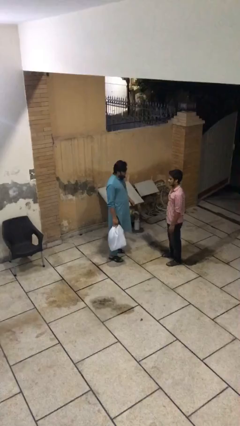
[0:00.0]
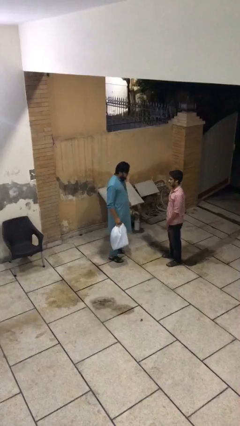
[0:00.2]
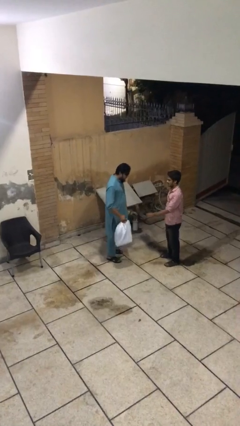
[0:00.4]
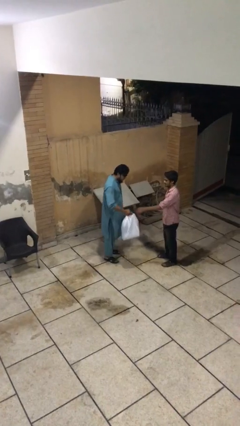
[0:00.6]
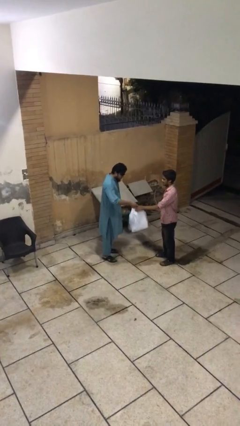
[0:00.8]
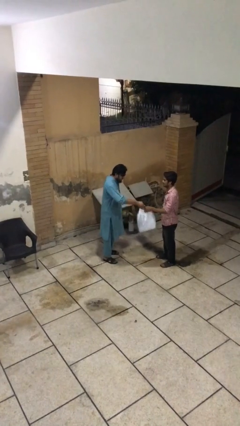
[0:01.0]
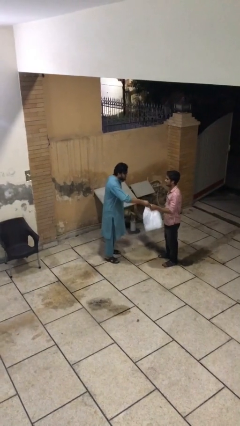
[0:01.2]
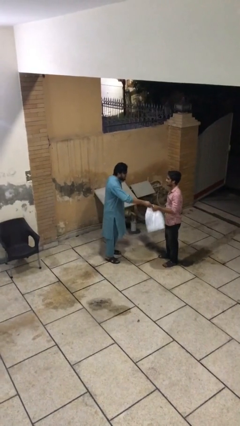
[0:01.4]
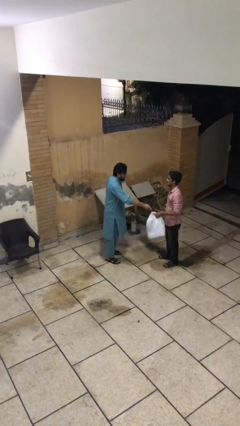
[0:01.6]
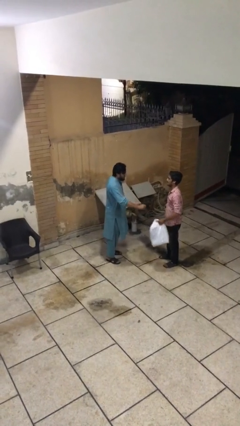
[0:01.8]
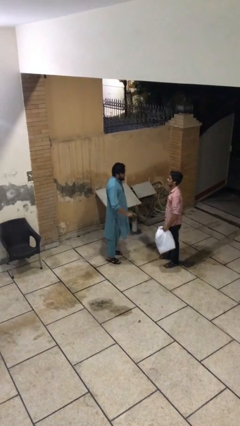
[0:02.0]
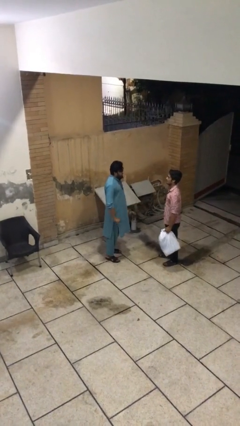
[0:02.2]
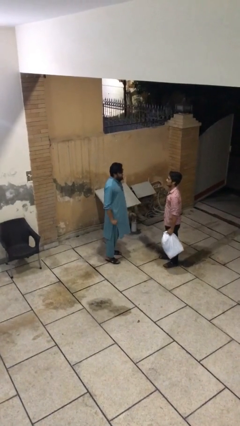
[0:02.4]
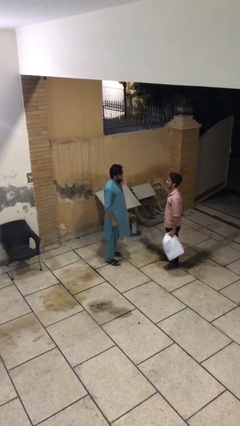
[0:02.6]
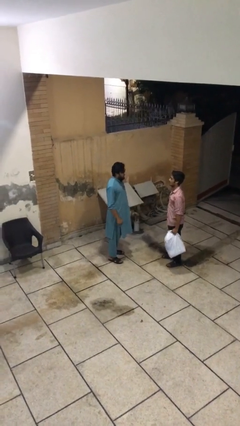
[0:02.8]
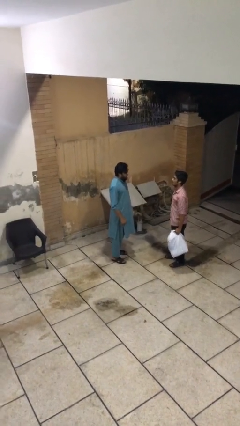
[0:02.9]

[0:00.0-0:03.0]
person transfers object to person

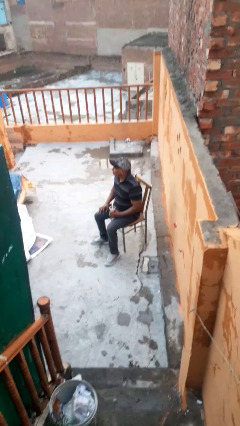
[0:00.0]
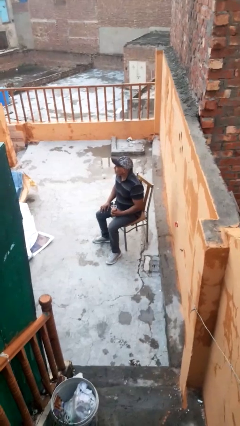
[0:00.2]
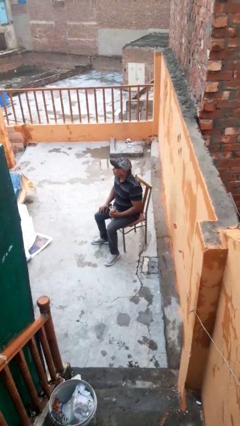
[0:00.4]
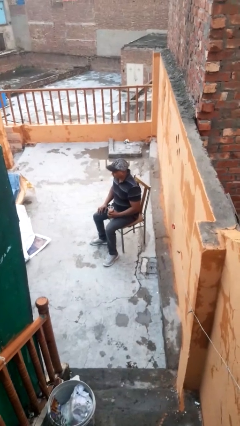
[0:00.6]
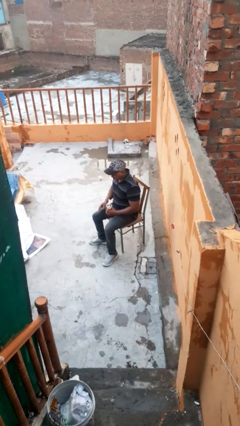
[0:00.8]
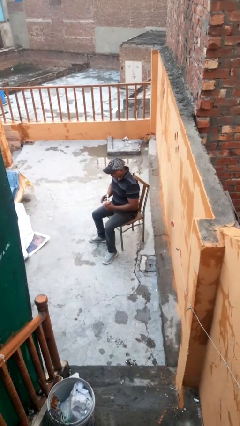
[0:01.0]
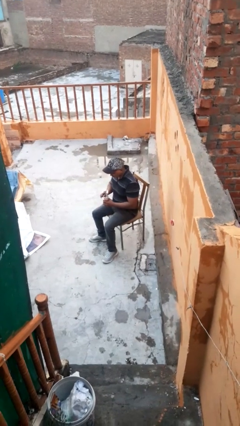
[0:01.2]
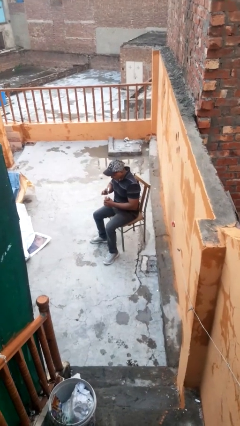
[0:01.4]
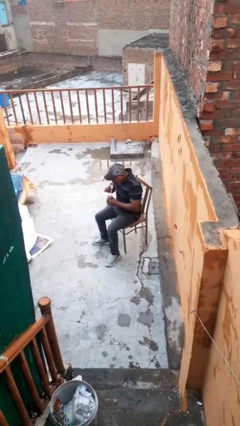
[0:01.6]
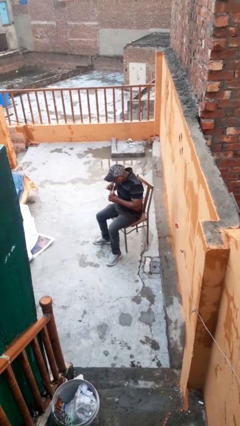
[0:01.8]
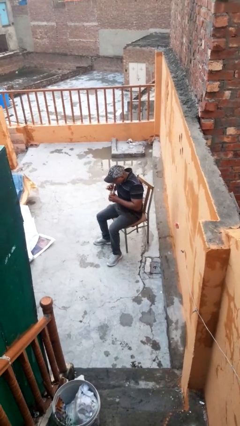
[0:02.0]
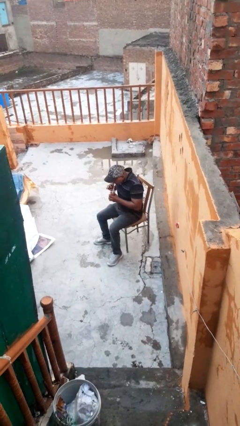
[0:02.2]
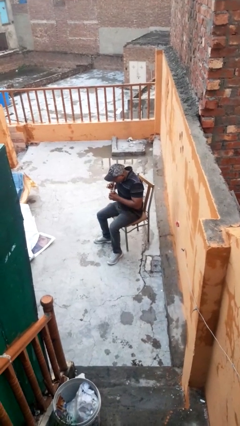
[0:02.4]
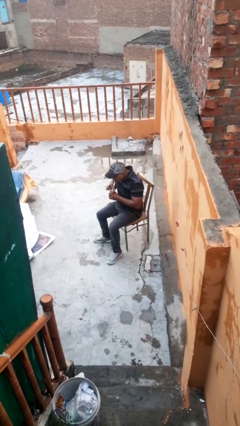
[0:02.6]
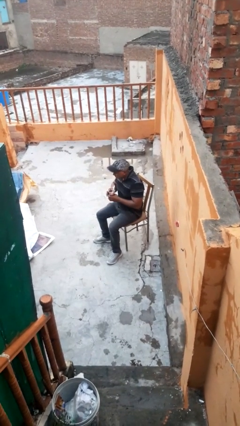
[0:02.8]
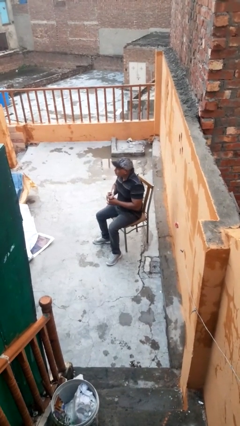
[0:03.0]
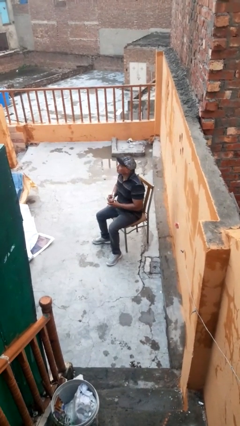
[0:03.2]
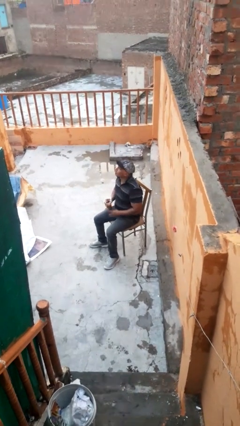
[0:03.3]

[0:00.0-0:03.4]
person drinks from straw

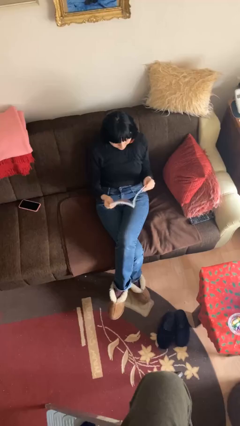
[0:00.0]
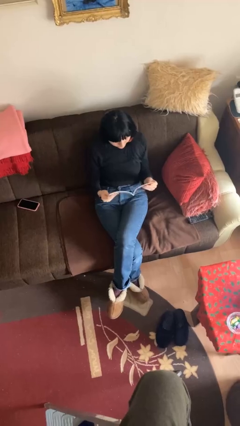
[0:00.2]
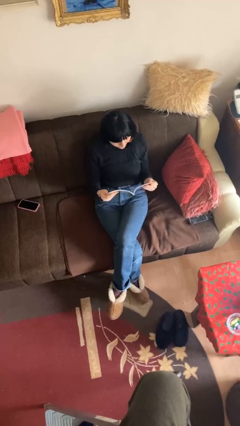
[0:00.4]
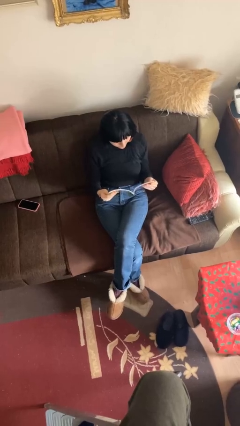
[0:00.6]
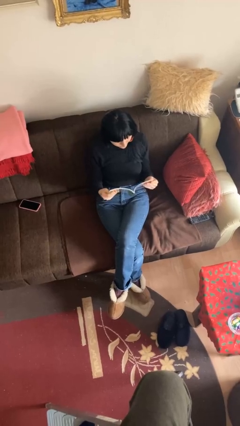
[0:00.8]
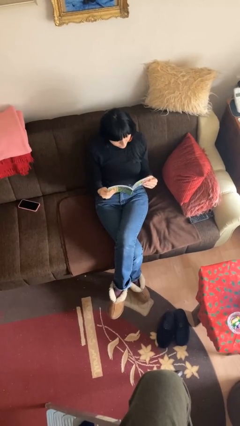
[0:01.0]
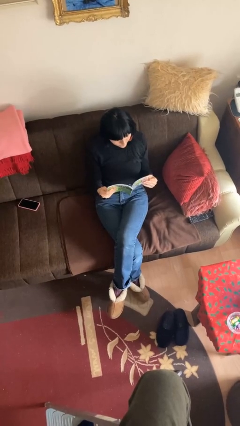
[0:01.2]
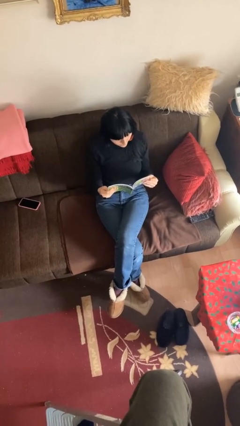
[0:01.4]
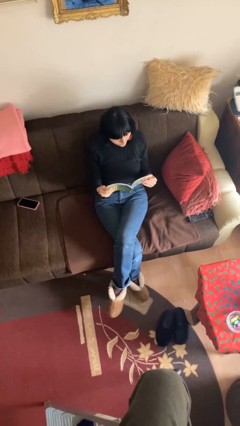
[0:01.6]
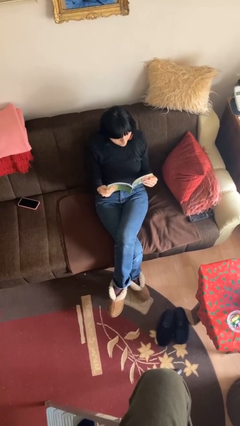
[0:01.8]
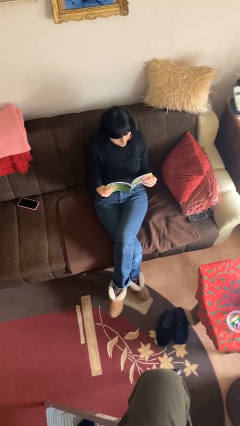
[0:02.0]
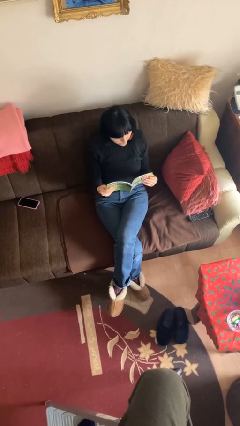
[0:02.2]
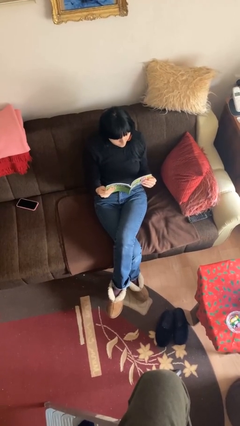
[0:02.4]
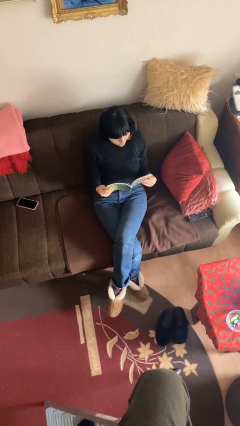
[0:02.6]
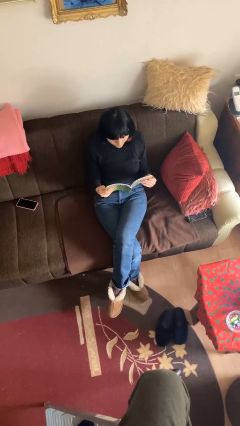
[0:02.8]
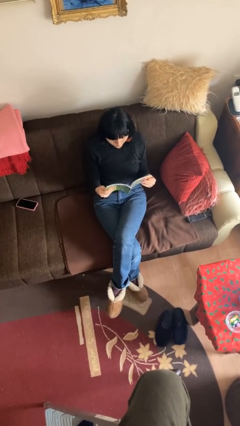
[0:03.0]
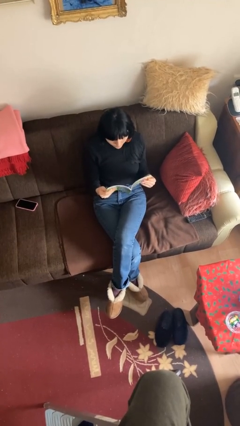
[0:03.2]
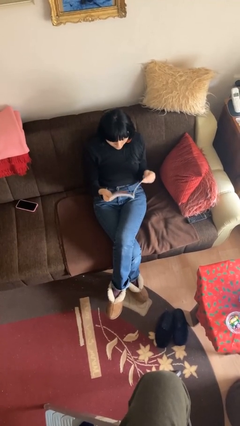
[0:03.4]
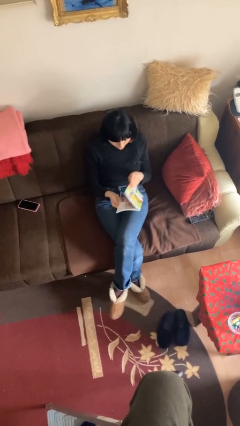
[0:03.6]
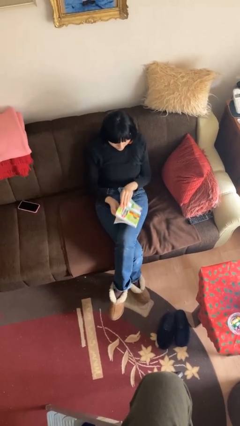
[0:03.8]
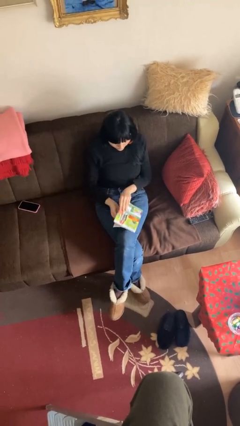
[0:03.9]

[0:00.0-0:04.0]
person reads document

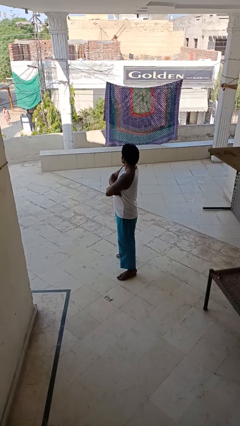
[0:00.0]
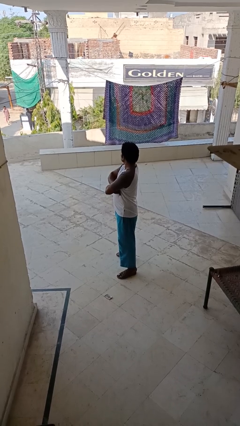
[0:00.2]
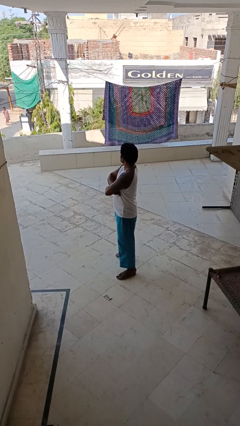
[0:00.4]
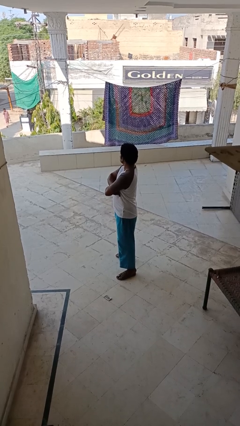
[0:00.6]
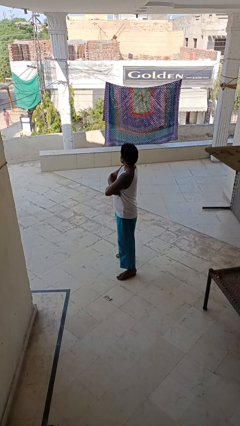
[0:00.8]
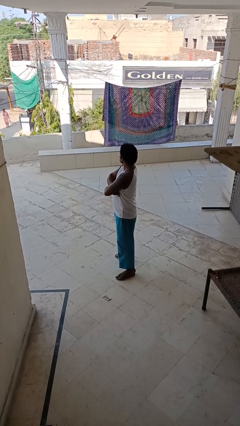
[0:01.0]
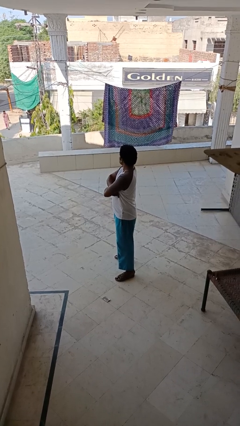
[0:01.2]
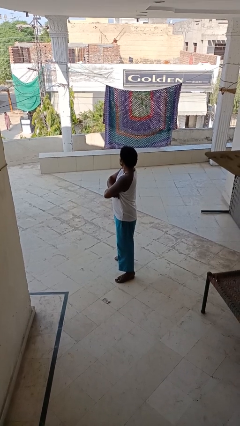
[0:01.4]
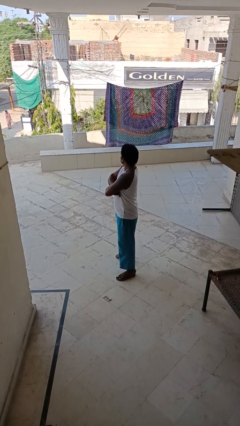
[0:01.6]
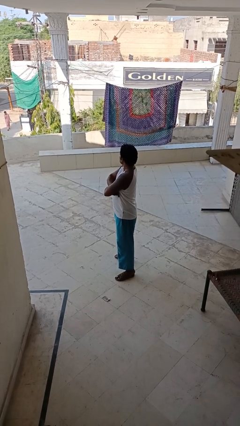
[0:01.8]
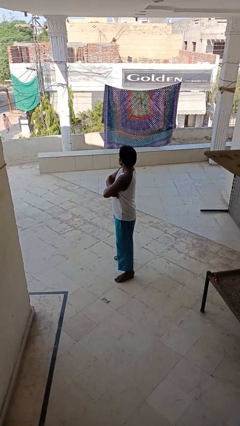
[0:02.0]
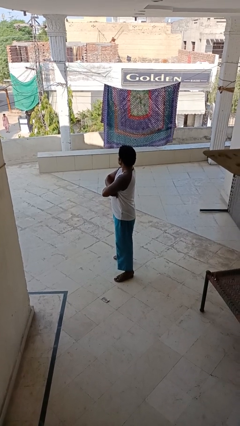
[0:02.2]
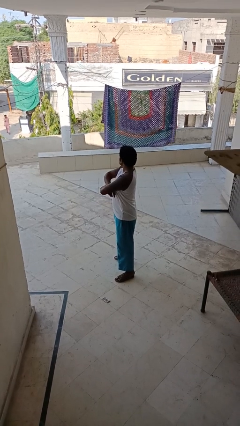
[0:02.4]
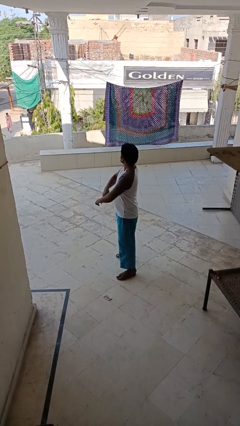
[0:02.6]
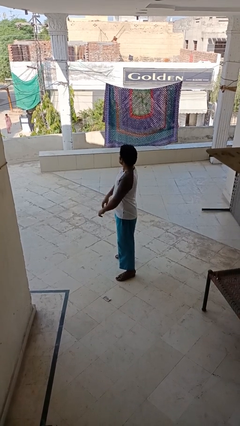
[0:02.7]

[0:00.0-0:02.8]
person crosses arms

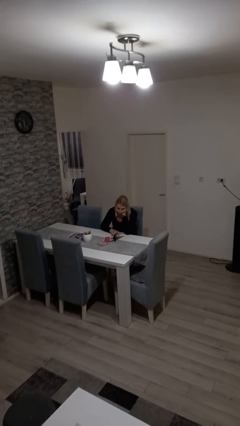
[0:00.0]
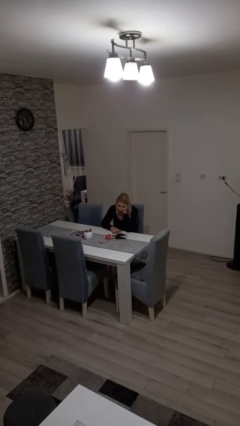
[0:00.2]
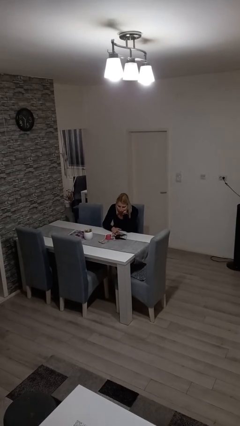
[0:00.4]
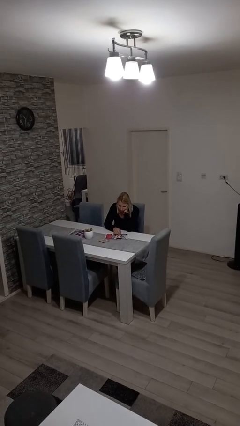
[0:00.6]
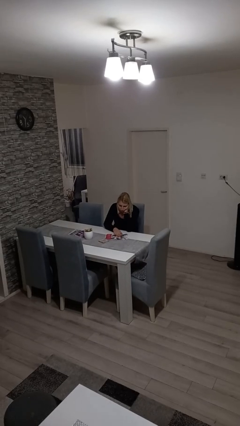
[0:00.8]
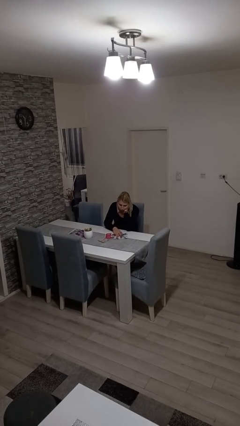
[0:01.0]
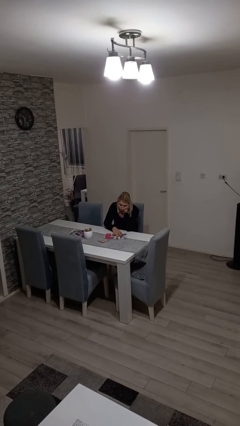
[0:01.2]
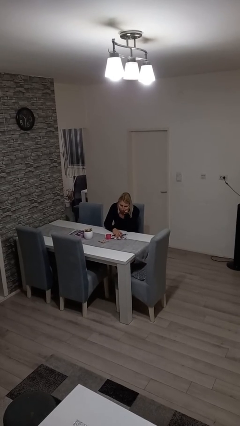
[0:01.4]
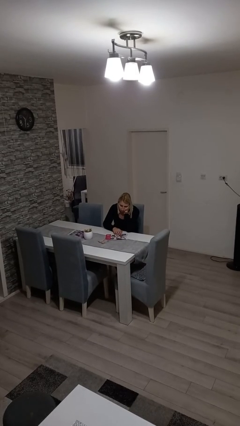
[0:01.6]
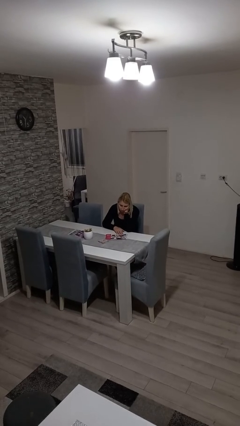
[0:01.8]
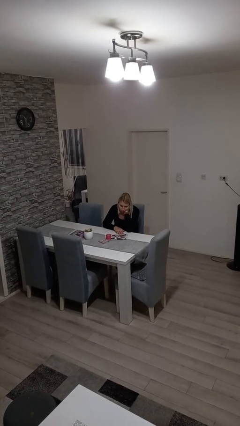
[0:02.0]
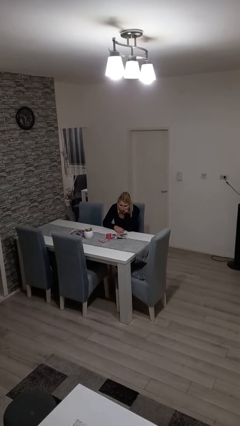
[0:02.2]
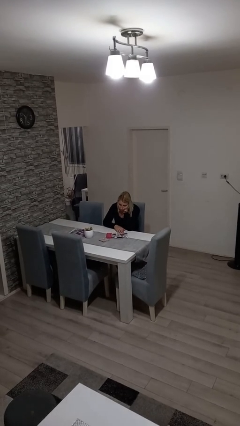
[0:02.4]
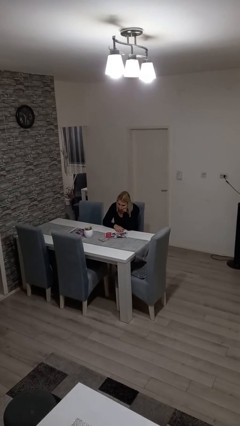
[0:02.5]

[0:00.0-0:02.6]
person reads magazine

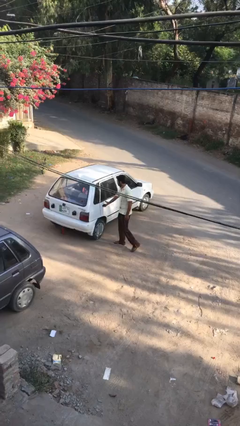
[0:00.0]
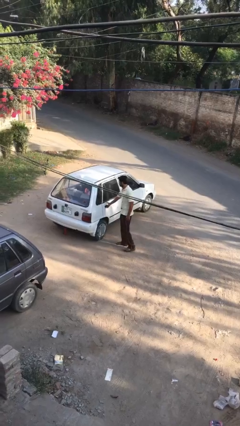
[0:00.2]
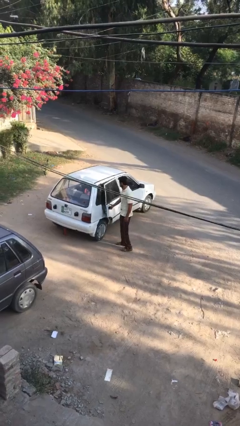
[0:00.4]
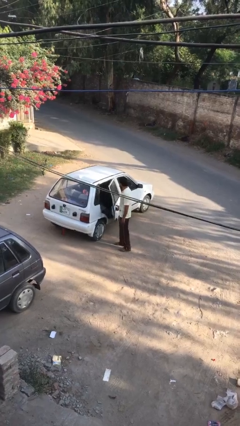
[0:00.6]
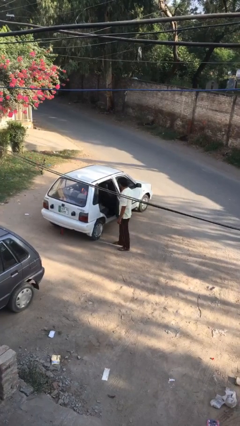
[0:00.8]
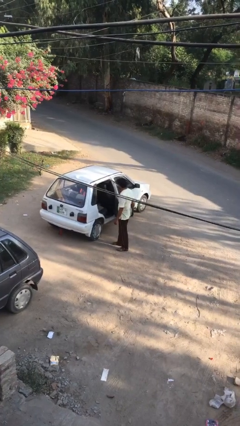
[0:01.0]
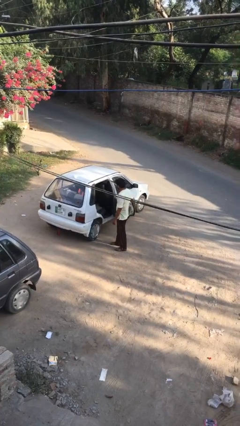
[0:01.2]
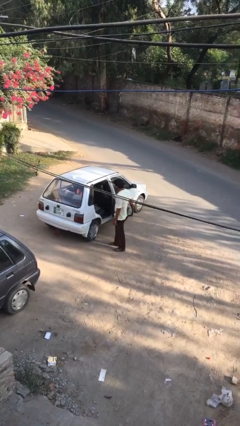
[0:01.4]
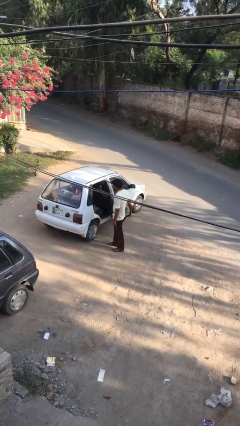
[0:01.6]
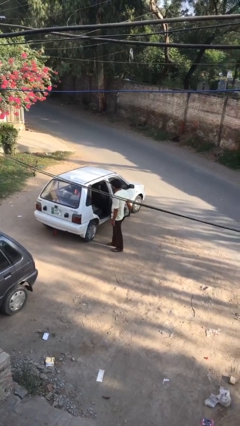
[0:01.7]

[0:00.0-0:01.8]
person opens car door
